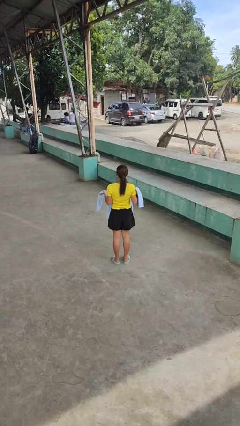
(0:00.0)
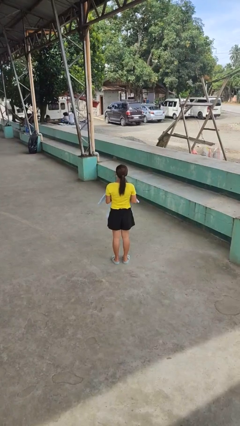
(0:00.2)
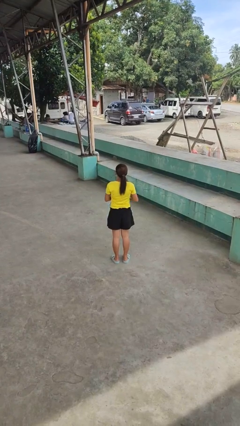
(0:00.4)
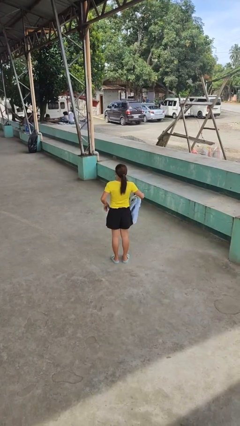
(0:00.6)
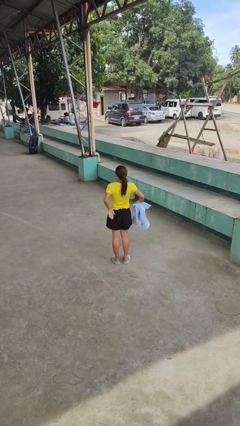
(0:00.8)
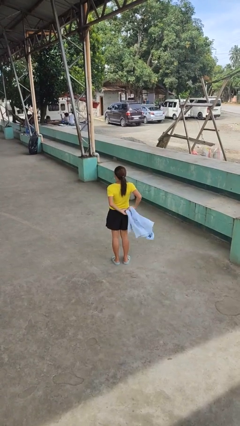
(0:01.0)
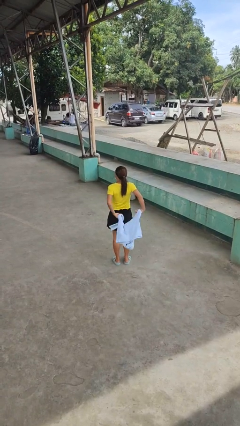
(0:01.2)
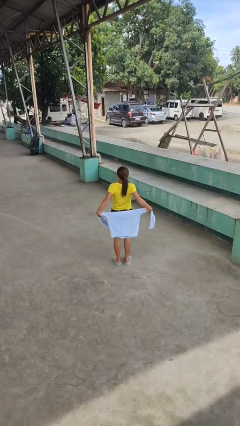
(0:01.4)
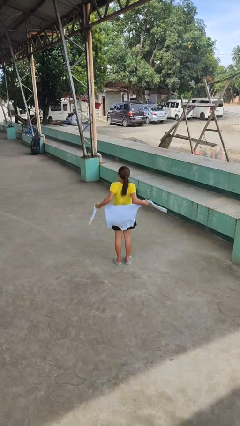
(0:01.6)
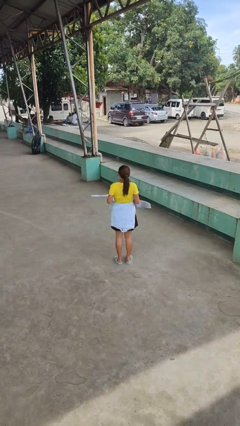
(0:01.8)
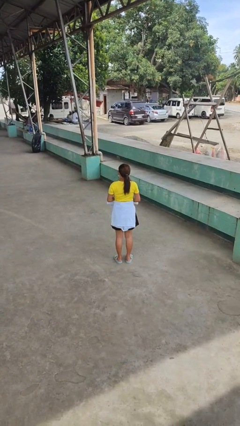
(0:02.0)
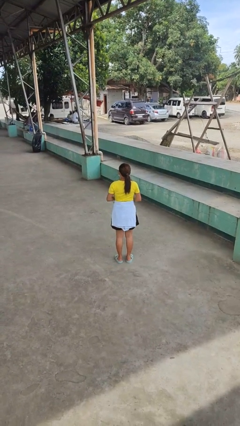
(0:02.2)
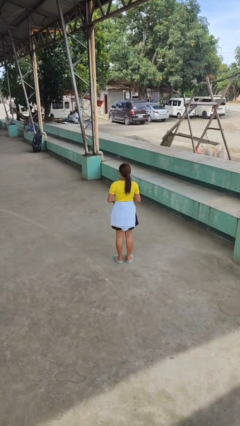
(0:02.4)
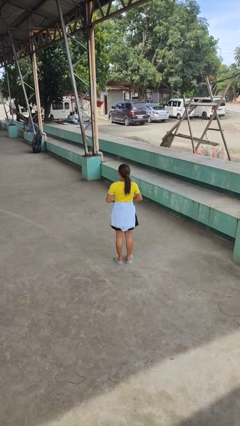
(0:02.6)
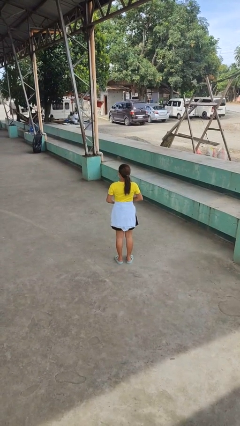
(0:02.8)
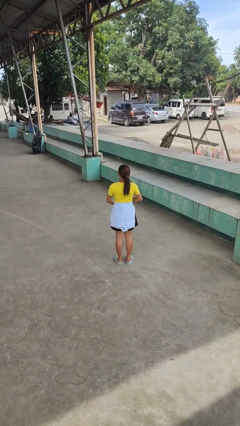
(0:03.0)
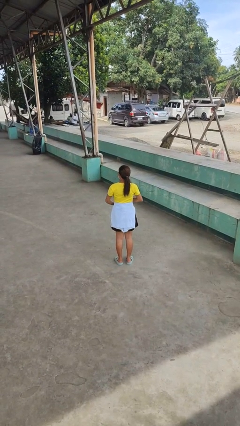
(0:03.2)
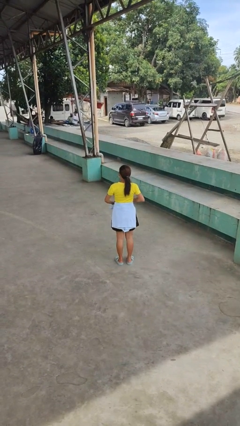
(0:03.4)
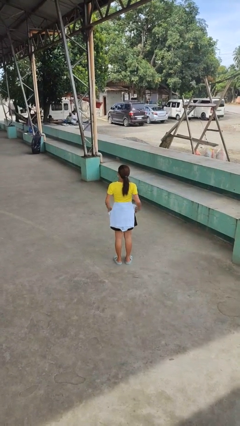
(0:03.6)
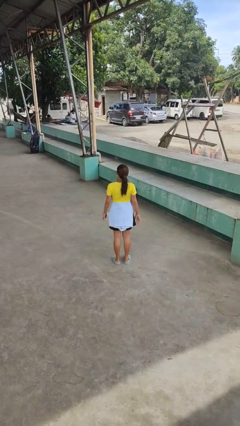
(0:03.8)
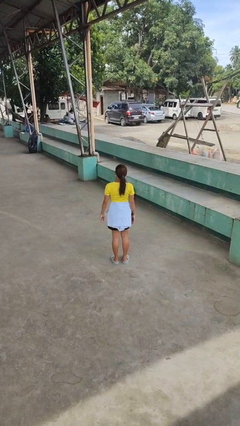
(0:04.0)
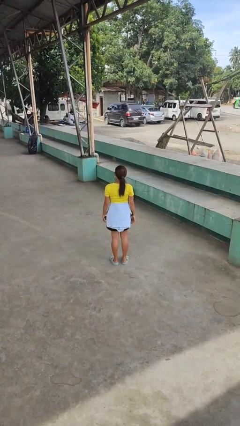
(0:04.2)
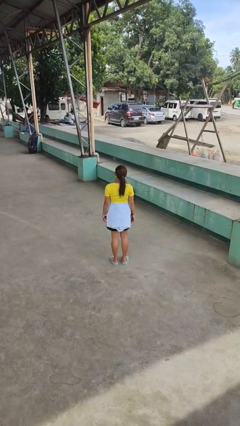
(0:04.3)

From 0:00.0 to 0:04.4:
person ties jacket around waist

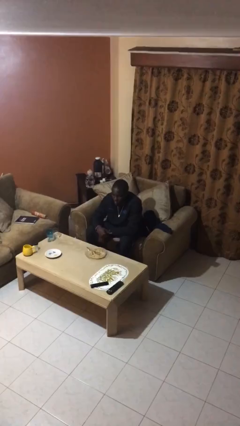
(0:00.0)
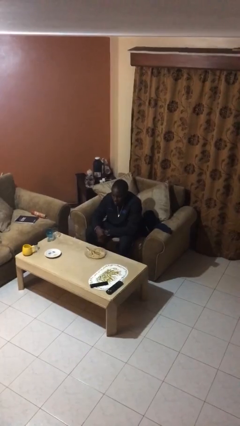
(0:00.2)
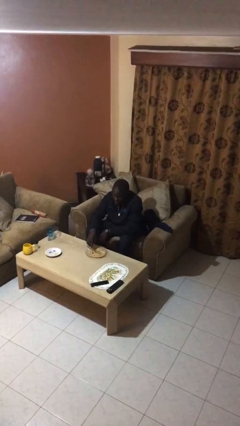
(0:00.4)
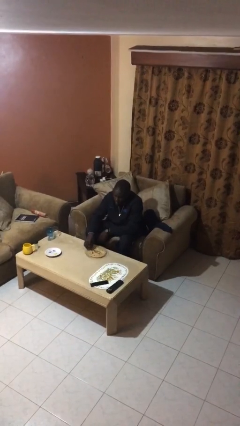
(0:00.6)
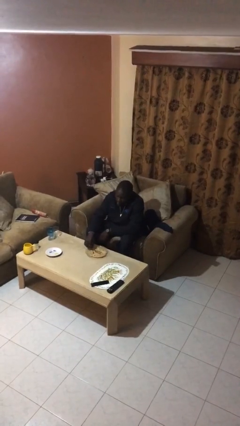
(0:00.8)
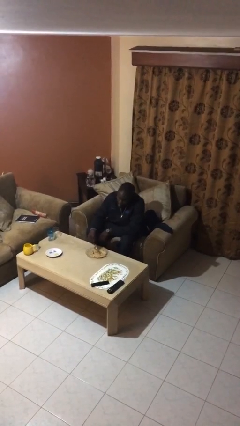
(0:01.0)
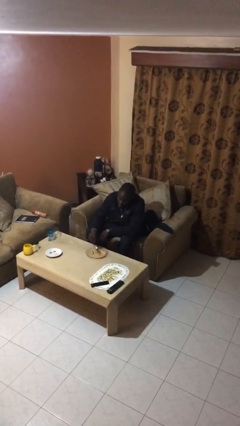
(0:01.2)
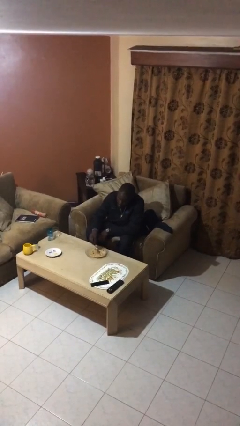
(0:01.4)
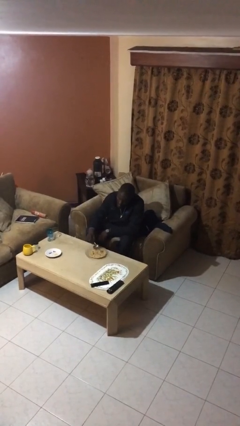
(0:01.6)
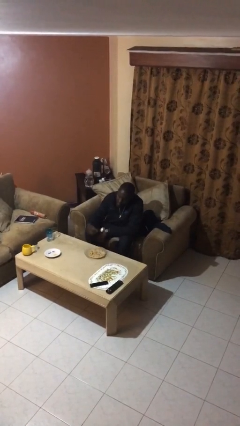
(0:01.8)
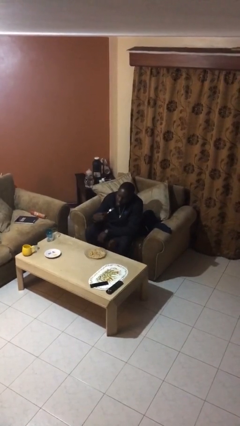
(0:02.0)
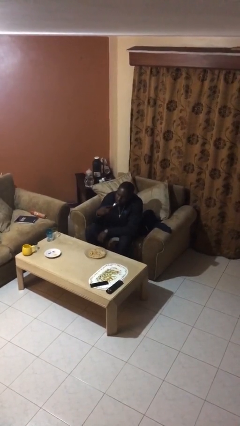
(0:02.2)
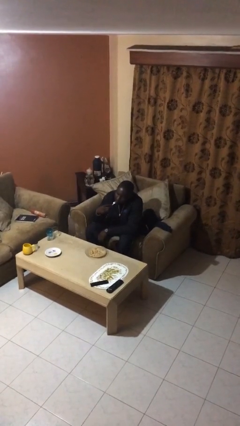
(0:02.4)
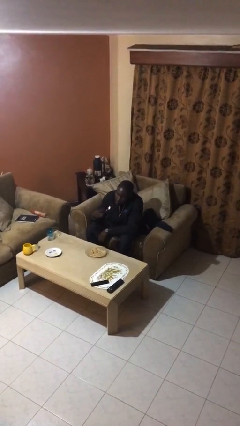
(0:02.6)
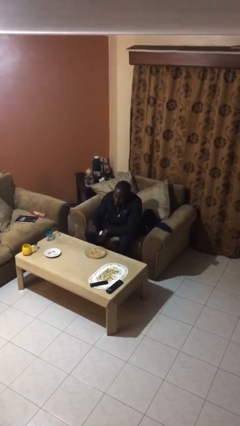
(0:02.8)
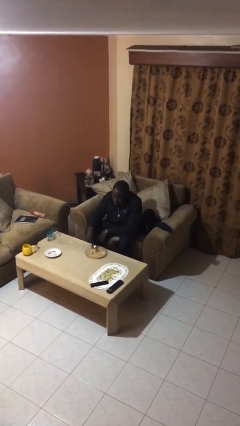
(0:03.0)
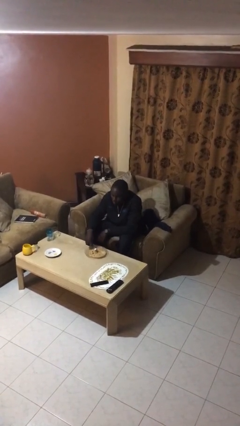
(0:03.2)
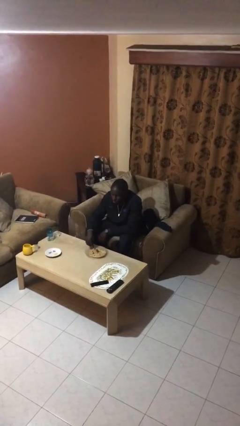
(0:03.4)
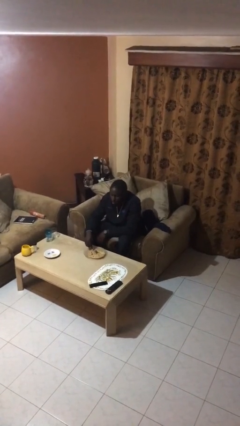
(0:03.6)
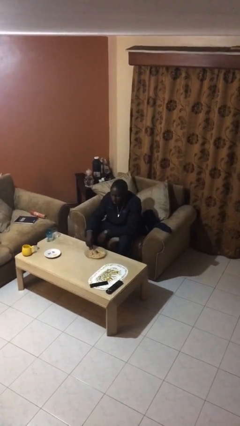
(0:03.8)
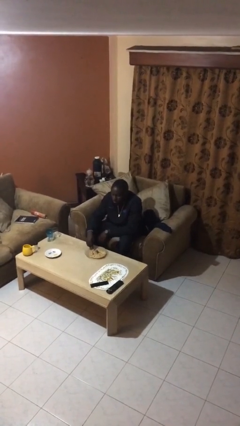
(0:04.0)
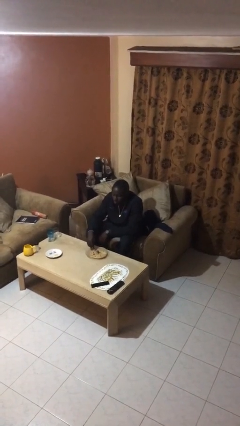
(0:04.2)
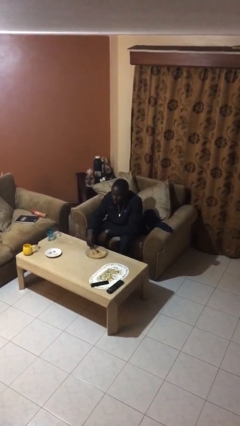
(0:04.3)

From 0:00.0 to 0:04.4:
person eats with utensil

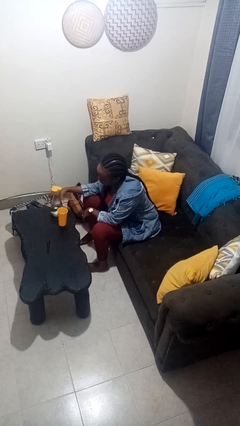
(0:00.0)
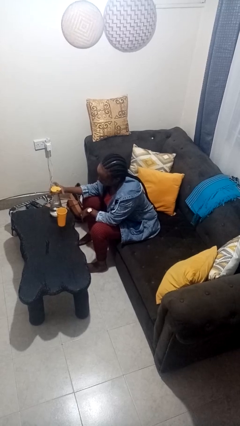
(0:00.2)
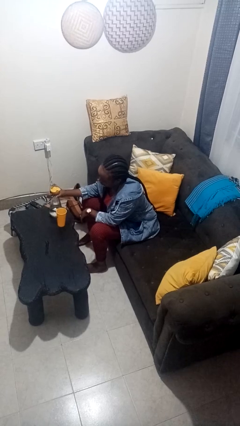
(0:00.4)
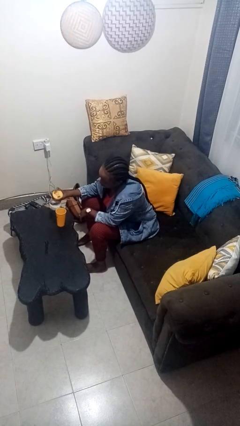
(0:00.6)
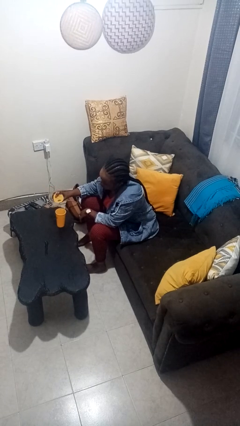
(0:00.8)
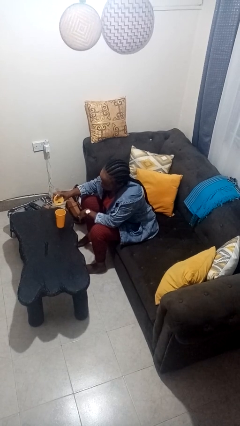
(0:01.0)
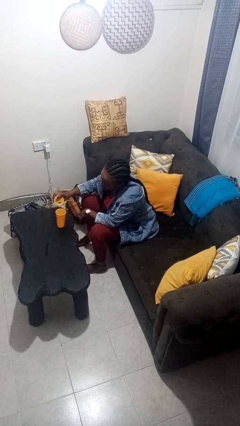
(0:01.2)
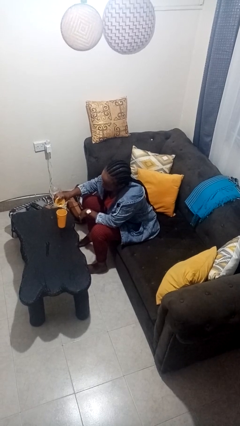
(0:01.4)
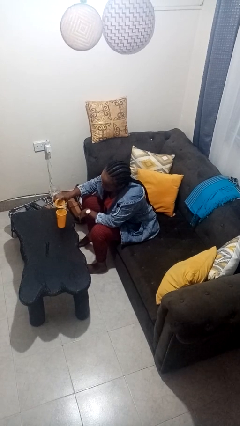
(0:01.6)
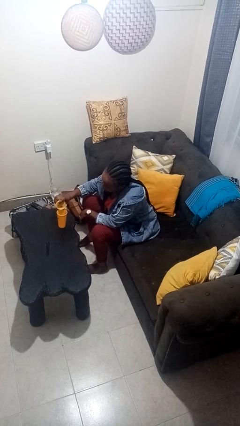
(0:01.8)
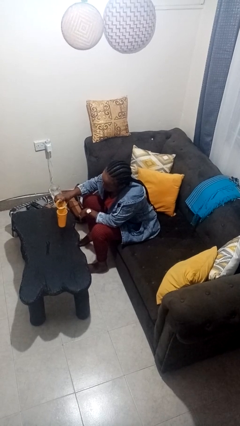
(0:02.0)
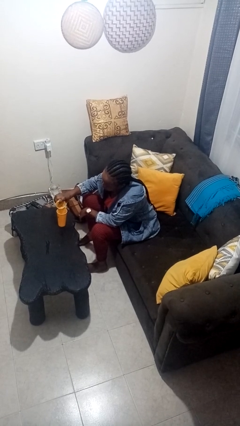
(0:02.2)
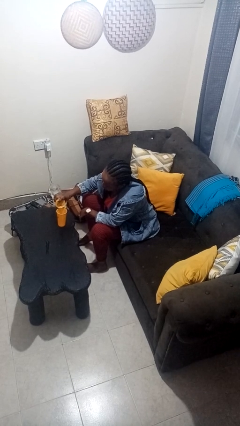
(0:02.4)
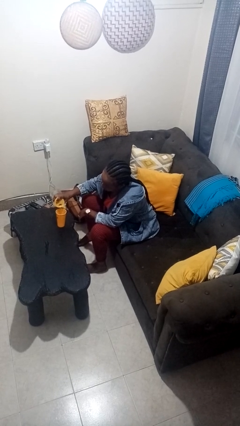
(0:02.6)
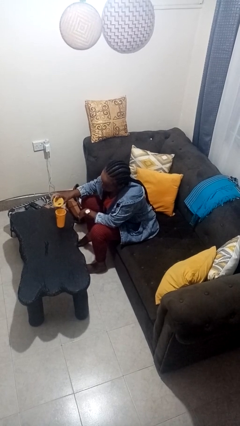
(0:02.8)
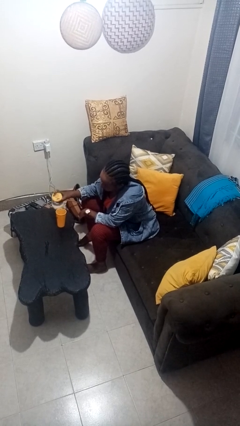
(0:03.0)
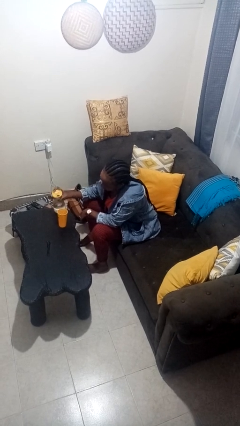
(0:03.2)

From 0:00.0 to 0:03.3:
person pours liquid into cup

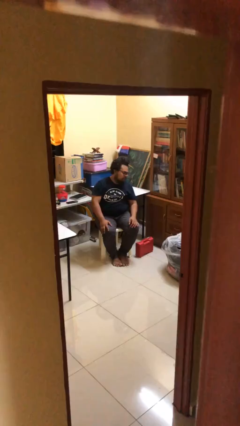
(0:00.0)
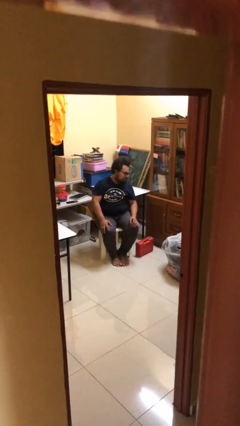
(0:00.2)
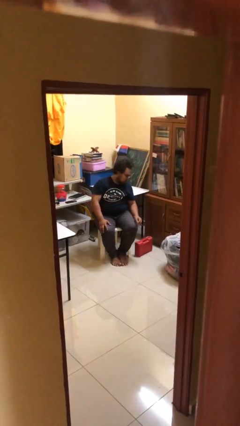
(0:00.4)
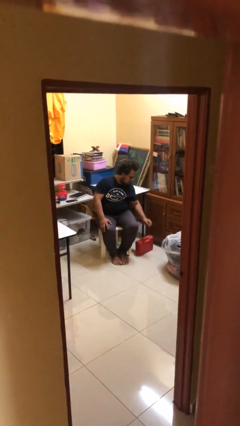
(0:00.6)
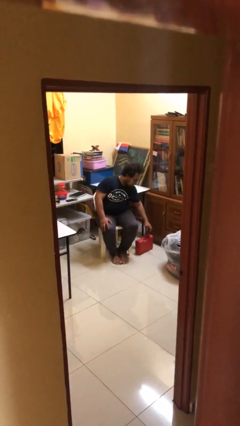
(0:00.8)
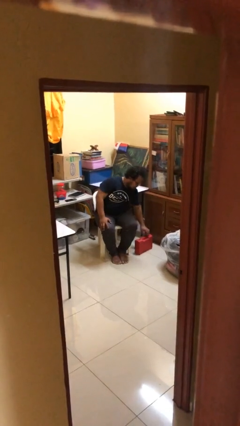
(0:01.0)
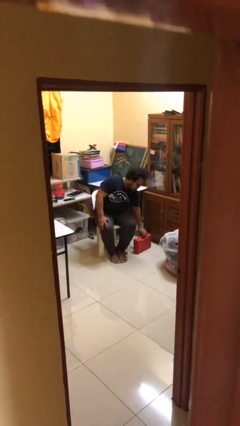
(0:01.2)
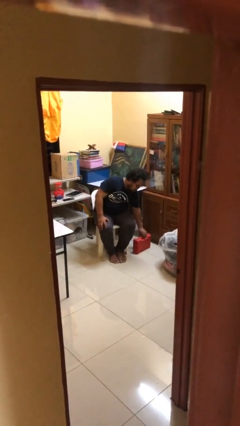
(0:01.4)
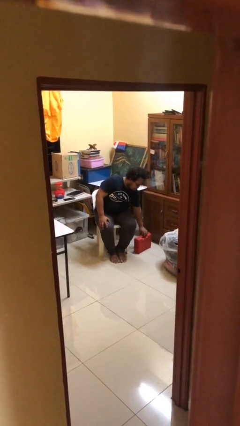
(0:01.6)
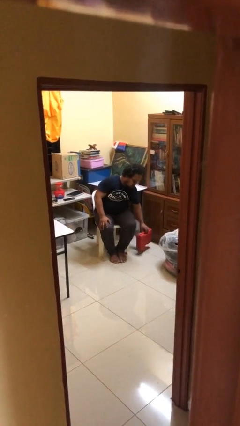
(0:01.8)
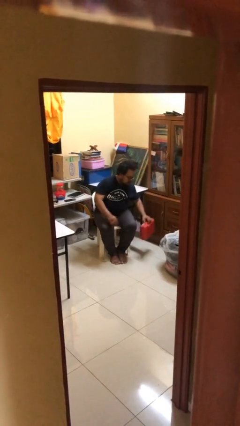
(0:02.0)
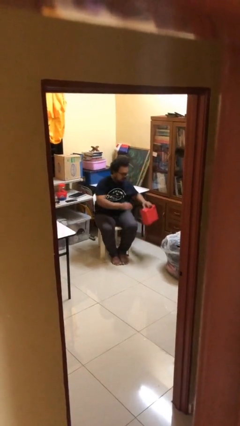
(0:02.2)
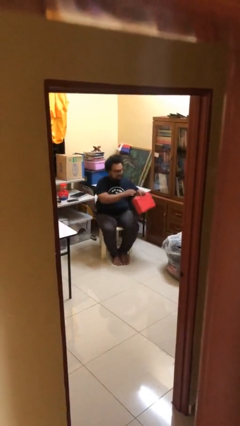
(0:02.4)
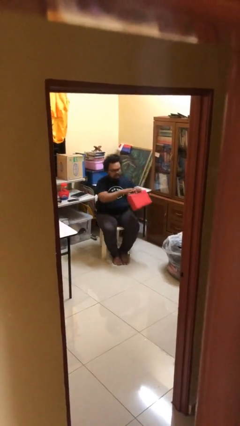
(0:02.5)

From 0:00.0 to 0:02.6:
person picks up object from floor

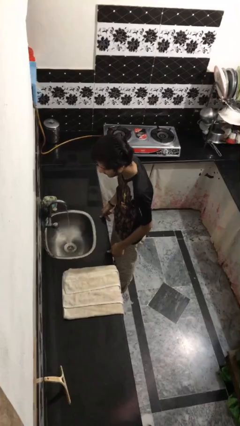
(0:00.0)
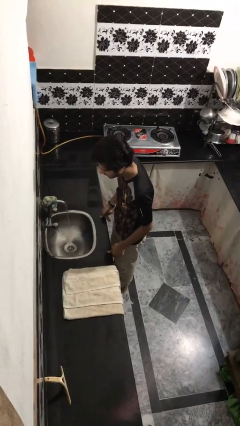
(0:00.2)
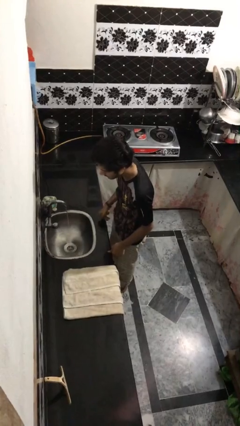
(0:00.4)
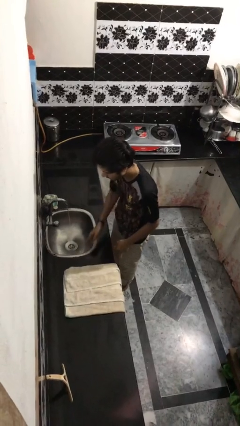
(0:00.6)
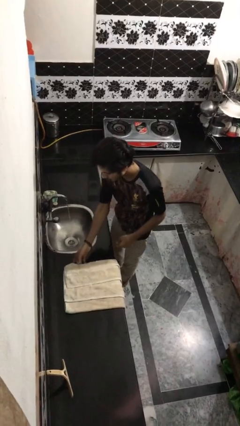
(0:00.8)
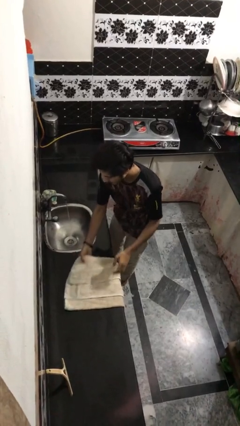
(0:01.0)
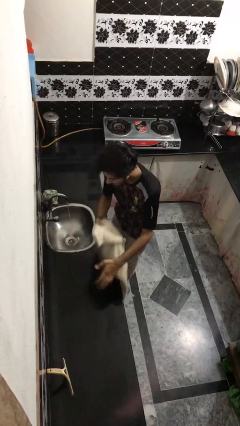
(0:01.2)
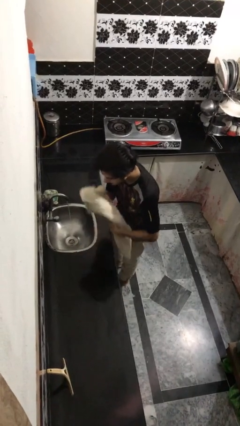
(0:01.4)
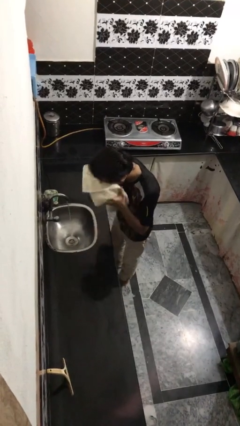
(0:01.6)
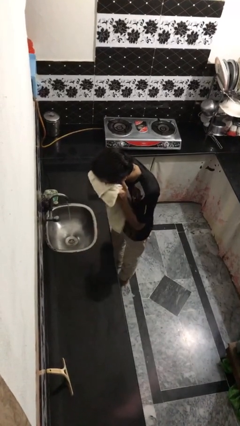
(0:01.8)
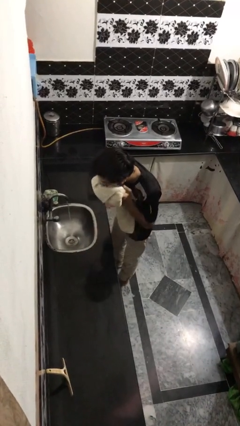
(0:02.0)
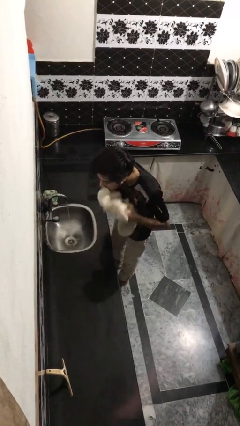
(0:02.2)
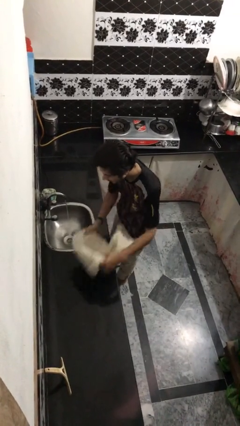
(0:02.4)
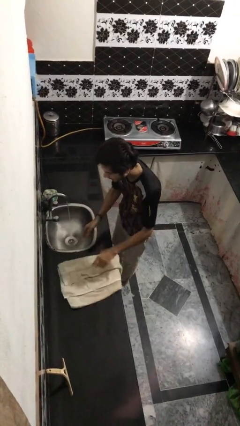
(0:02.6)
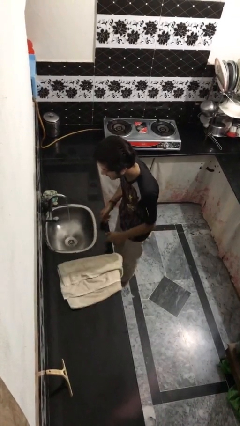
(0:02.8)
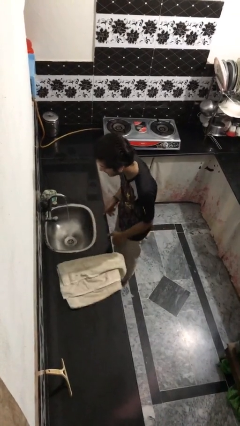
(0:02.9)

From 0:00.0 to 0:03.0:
person dries face with towel
